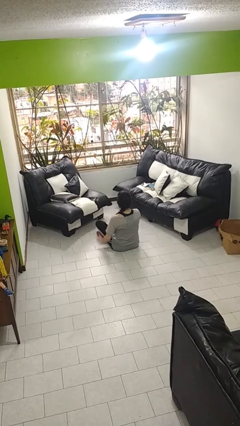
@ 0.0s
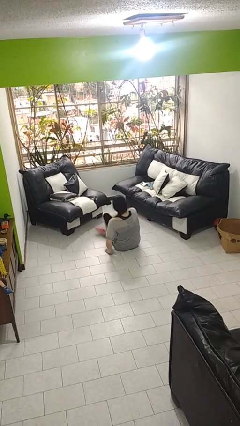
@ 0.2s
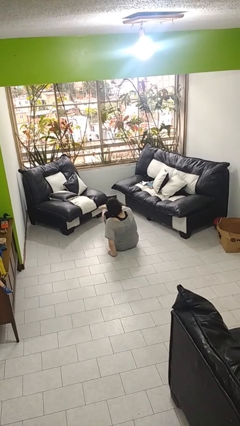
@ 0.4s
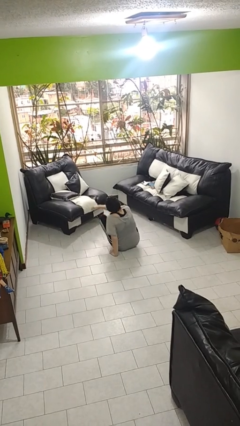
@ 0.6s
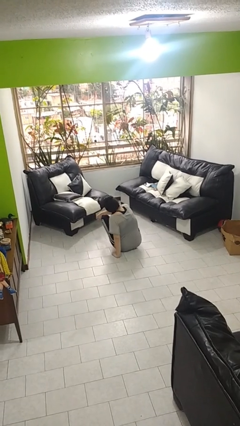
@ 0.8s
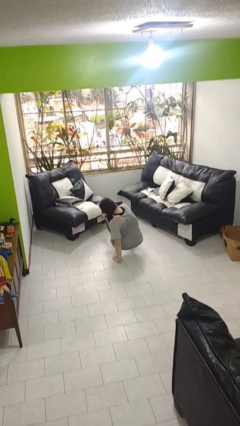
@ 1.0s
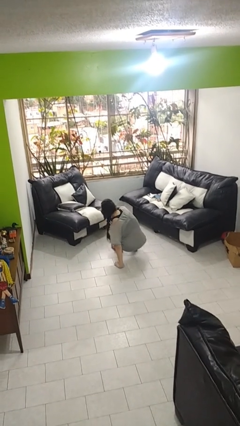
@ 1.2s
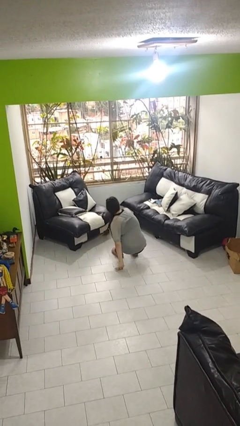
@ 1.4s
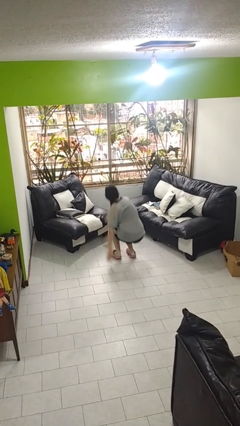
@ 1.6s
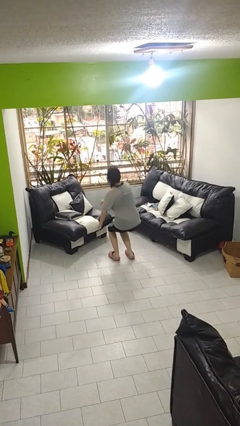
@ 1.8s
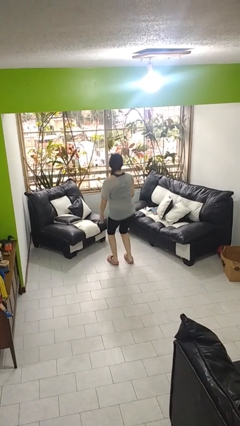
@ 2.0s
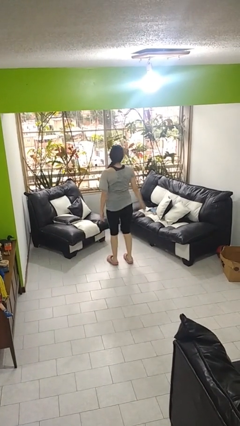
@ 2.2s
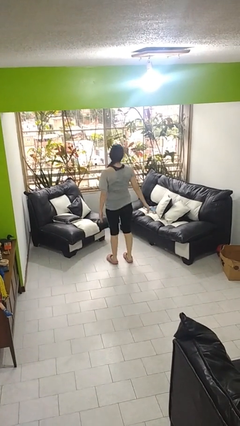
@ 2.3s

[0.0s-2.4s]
person stands up from floor

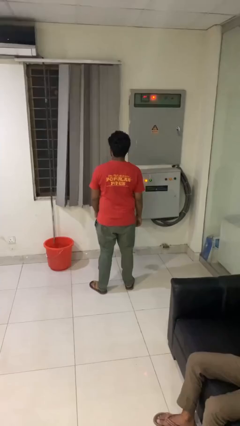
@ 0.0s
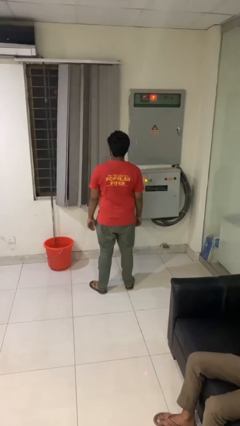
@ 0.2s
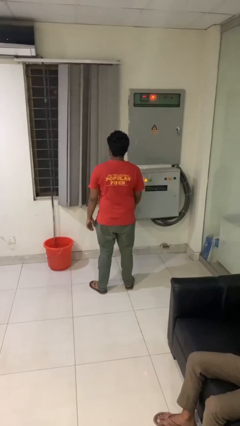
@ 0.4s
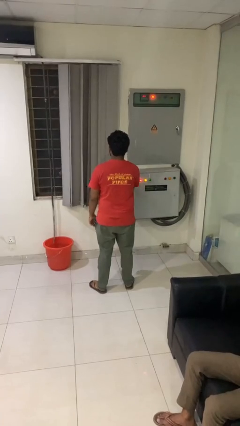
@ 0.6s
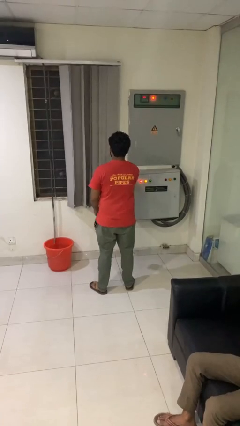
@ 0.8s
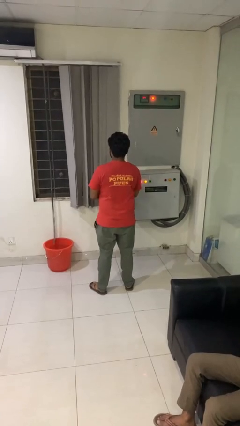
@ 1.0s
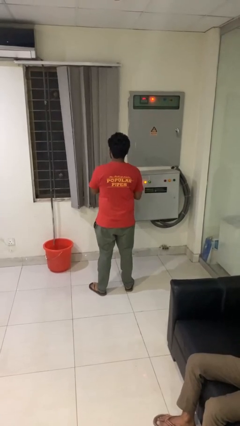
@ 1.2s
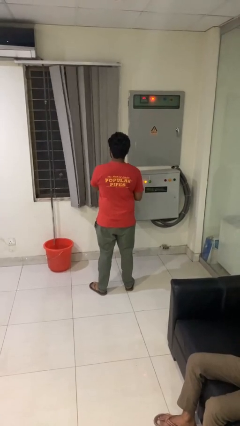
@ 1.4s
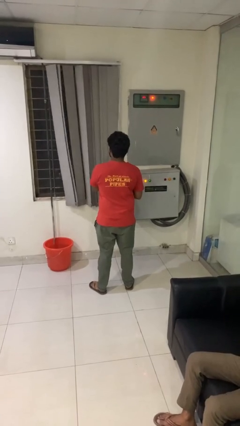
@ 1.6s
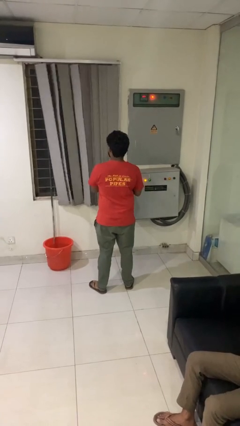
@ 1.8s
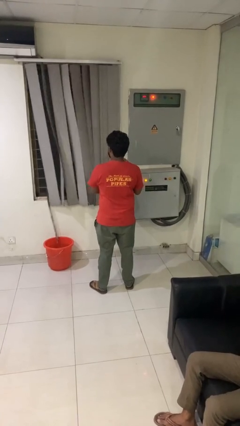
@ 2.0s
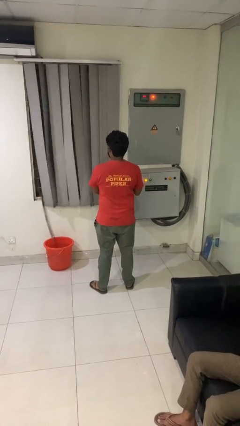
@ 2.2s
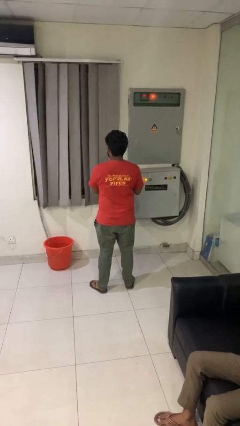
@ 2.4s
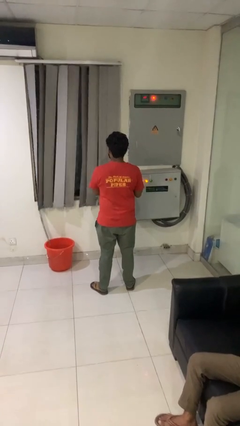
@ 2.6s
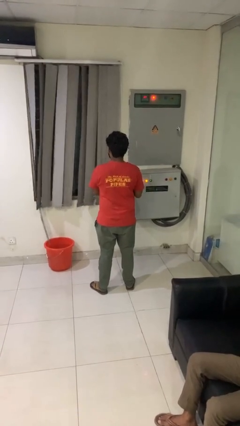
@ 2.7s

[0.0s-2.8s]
person closes curtains

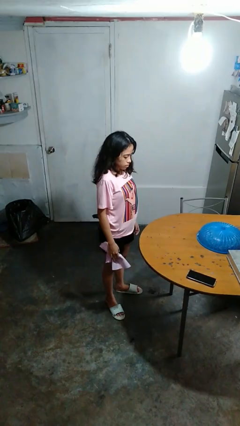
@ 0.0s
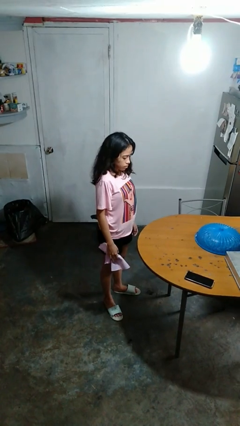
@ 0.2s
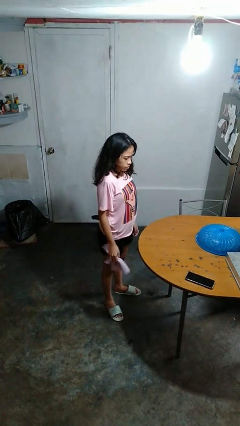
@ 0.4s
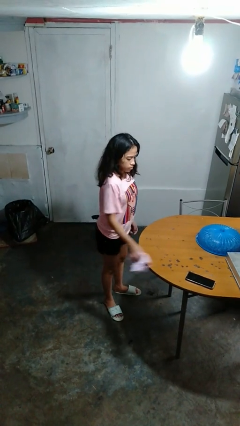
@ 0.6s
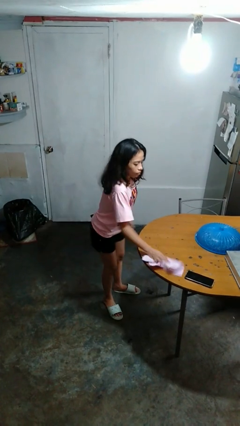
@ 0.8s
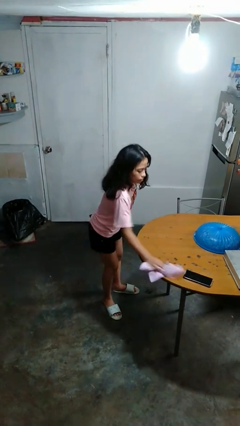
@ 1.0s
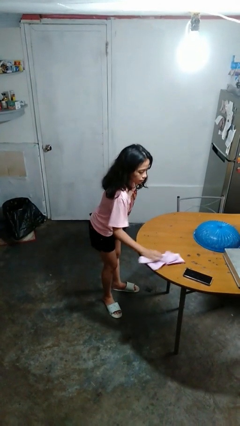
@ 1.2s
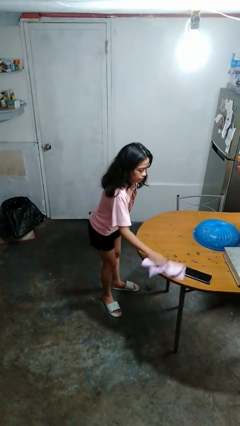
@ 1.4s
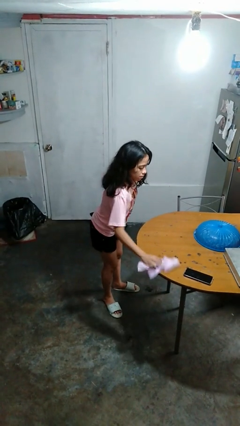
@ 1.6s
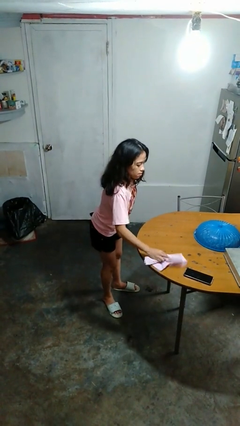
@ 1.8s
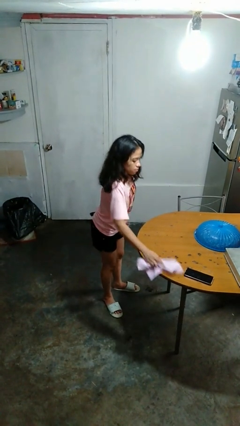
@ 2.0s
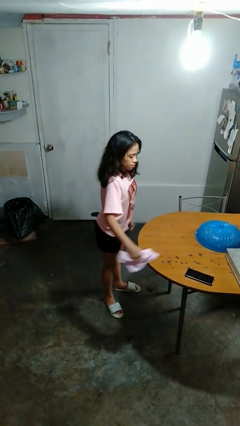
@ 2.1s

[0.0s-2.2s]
person cleans table with rag

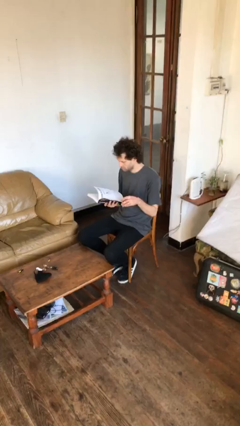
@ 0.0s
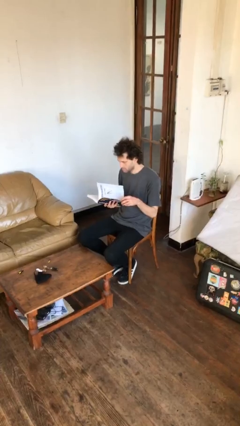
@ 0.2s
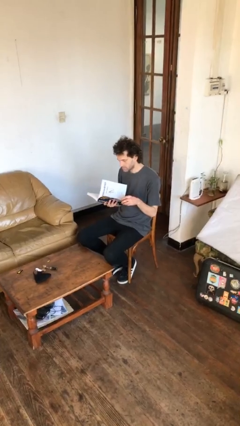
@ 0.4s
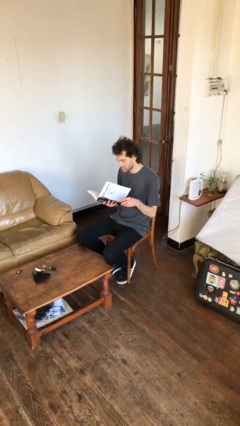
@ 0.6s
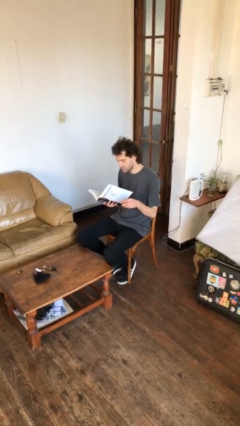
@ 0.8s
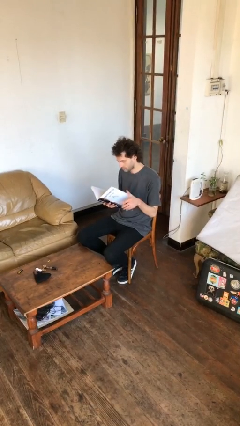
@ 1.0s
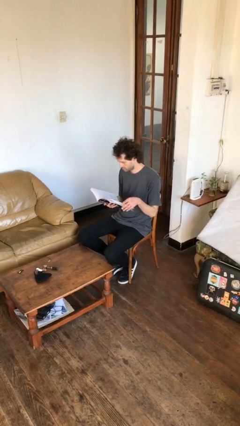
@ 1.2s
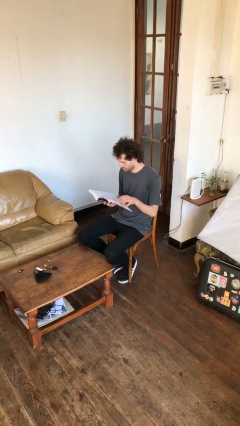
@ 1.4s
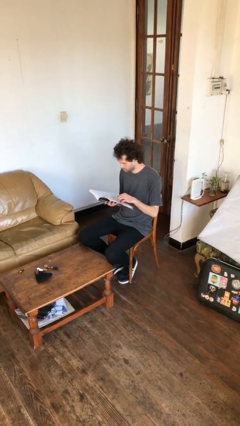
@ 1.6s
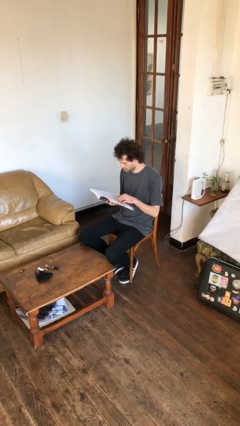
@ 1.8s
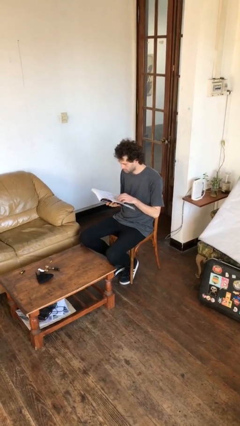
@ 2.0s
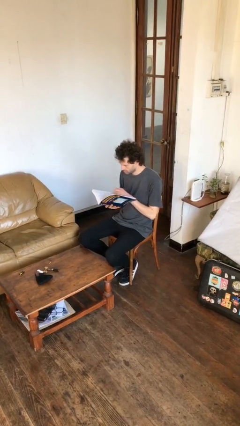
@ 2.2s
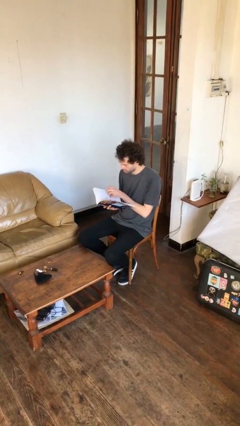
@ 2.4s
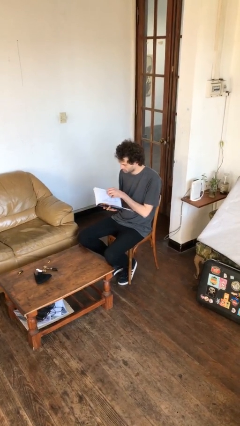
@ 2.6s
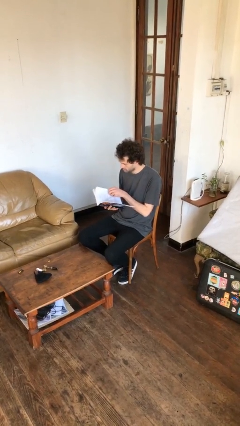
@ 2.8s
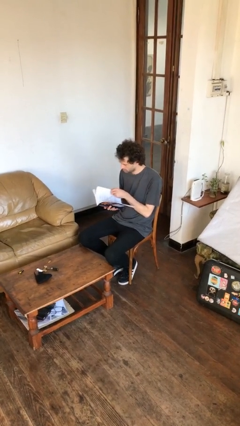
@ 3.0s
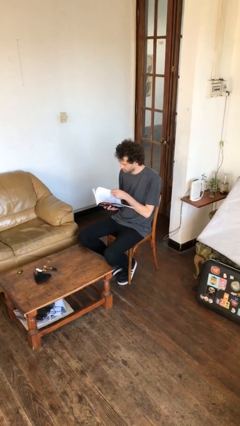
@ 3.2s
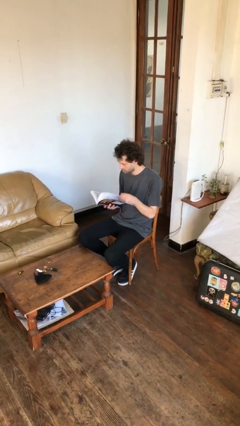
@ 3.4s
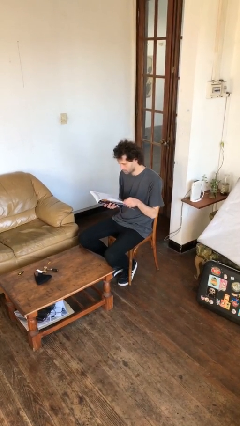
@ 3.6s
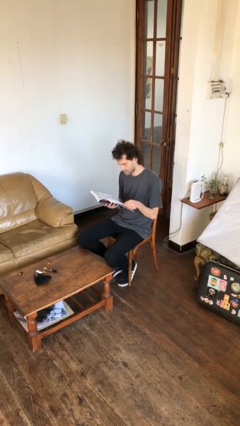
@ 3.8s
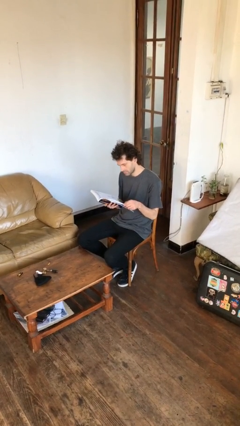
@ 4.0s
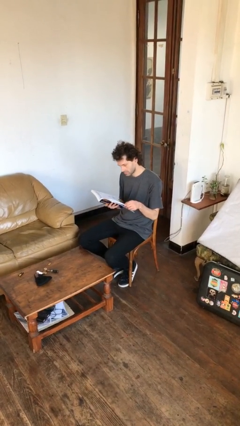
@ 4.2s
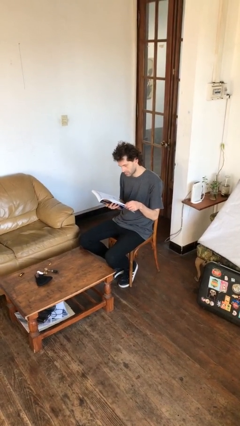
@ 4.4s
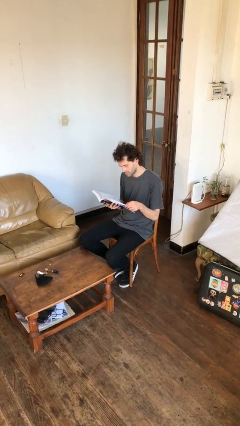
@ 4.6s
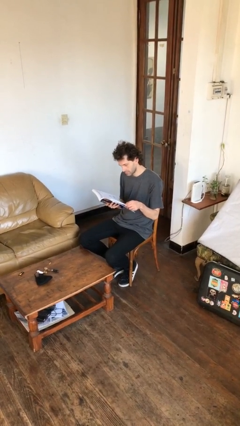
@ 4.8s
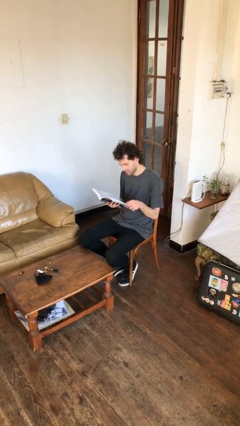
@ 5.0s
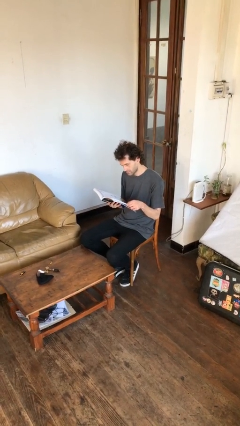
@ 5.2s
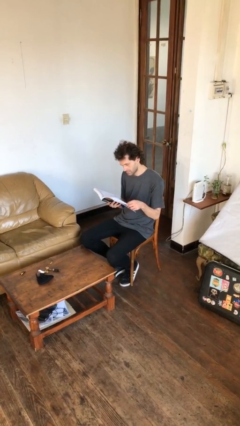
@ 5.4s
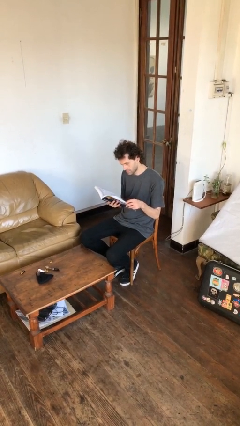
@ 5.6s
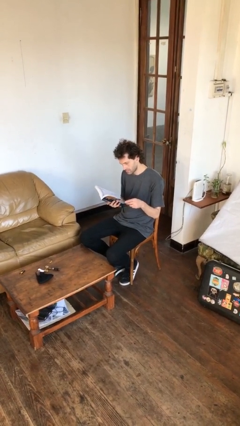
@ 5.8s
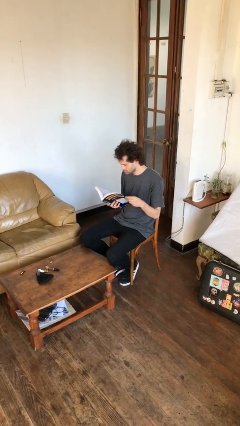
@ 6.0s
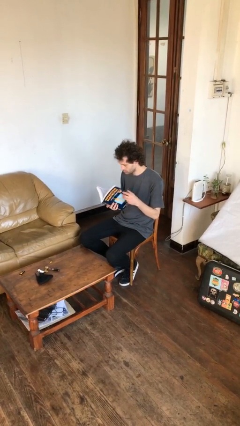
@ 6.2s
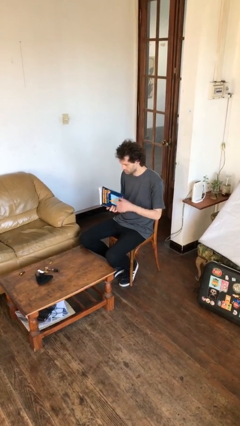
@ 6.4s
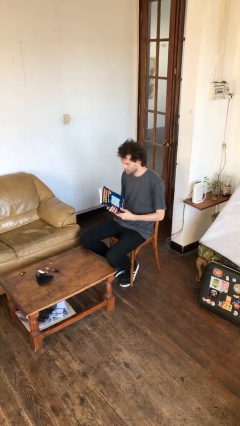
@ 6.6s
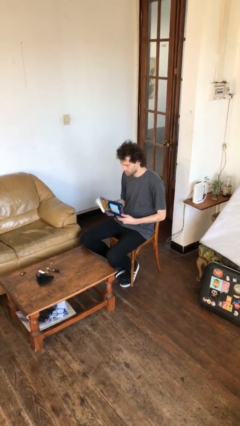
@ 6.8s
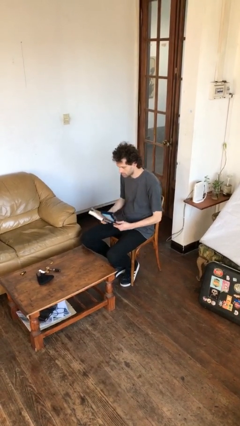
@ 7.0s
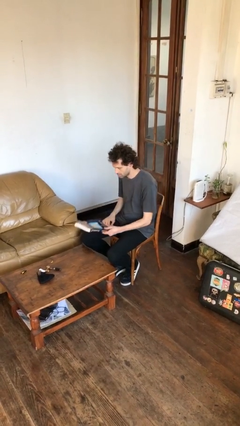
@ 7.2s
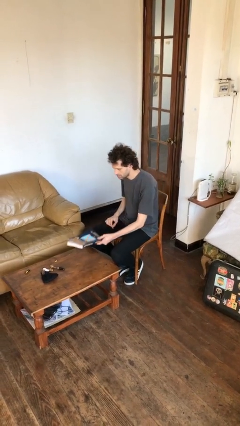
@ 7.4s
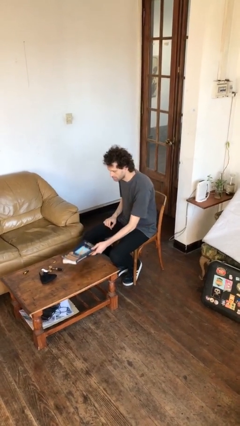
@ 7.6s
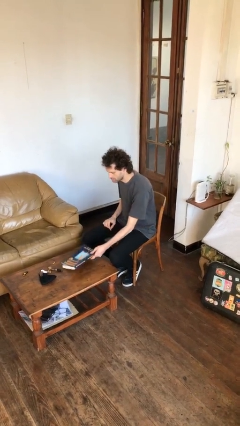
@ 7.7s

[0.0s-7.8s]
person reads document

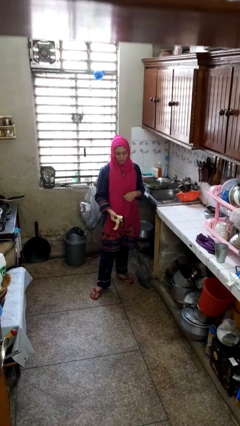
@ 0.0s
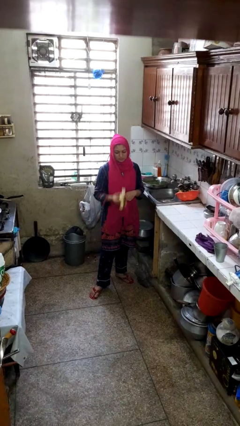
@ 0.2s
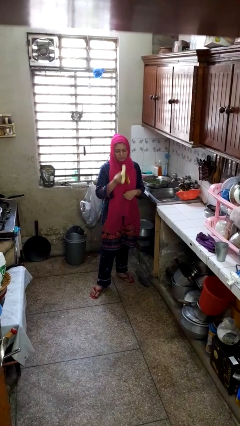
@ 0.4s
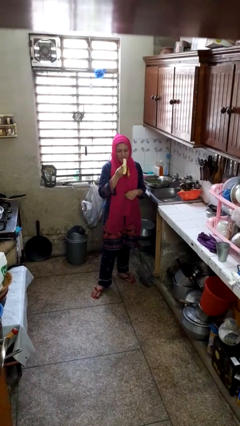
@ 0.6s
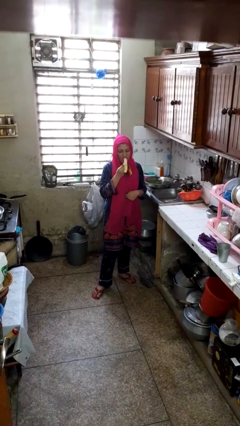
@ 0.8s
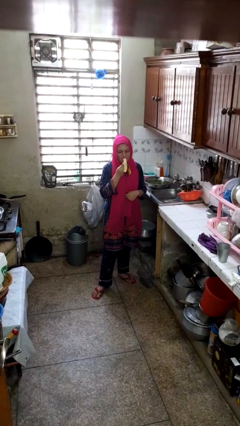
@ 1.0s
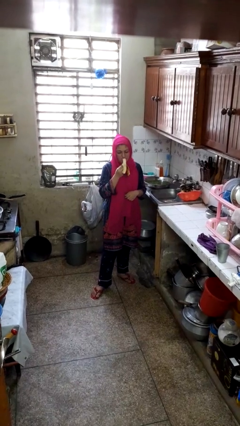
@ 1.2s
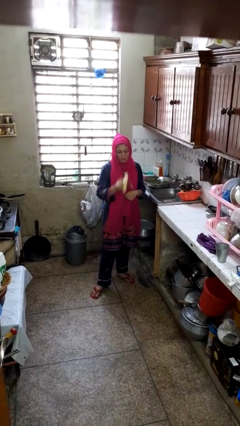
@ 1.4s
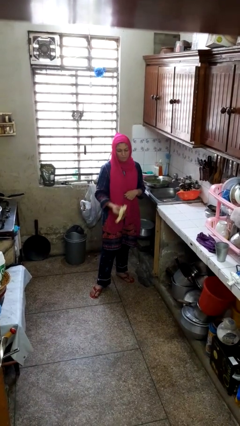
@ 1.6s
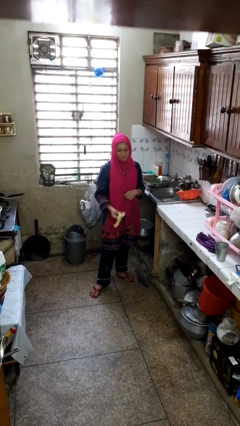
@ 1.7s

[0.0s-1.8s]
person eats banana

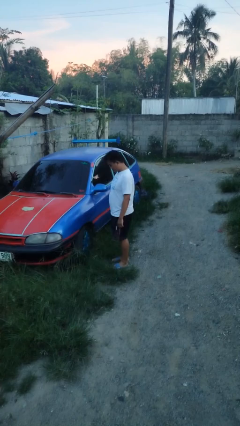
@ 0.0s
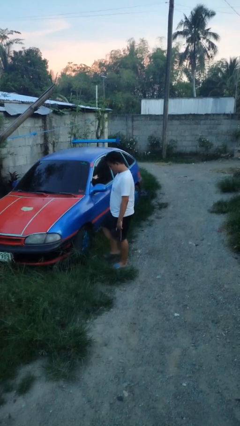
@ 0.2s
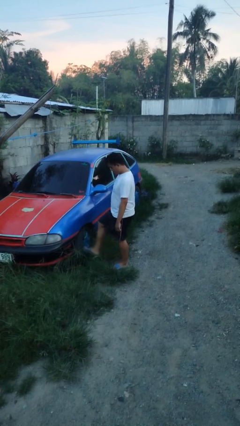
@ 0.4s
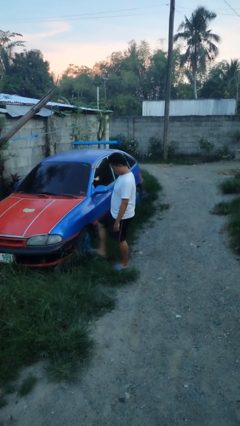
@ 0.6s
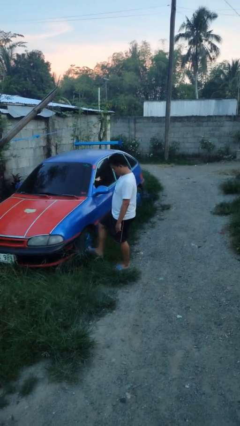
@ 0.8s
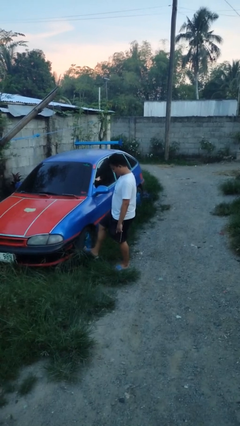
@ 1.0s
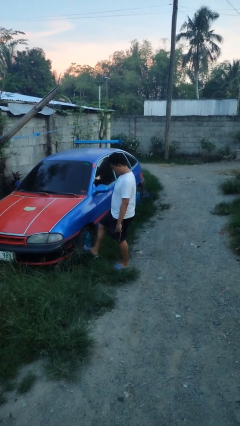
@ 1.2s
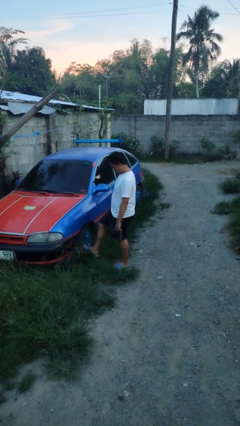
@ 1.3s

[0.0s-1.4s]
person kicks car tires
